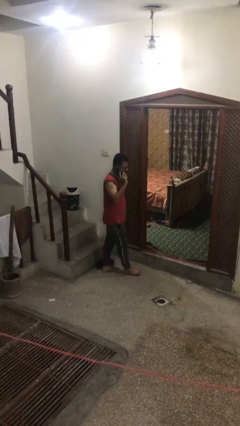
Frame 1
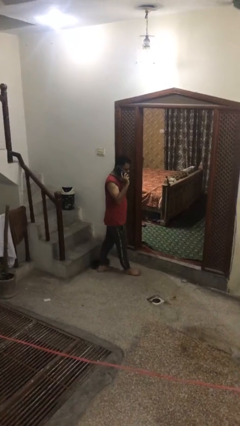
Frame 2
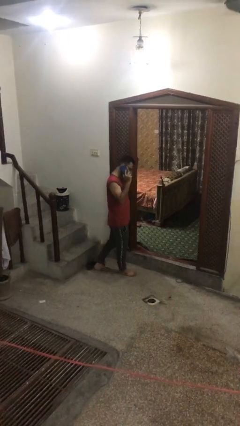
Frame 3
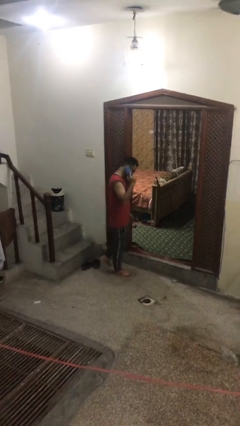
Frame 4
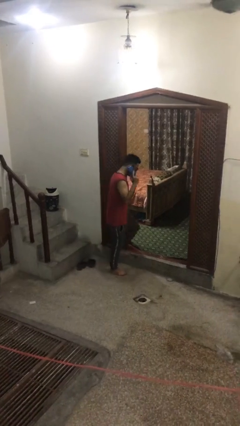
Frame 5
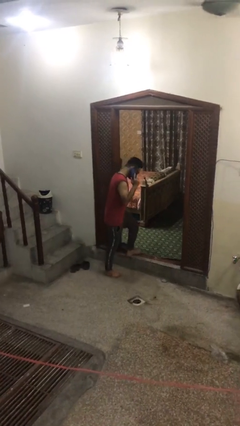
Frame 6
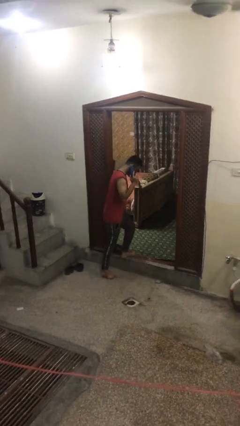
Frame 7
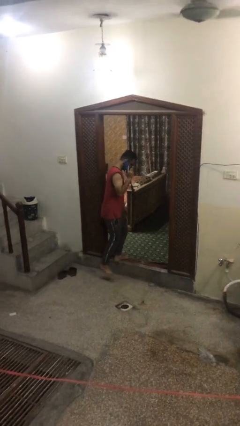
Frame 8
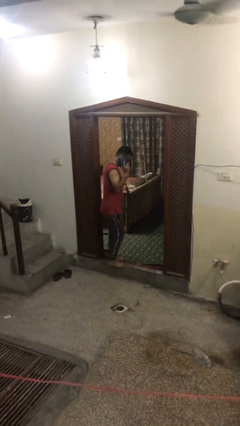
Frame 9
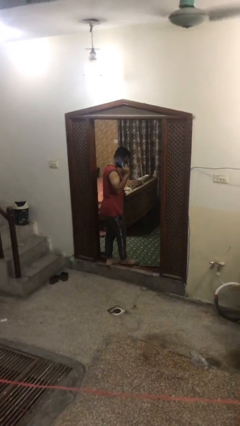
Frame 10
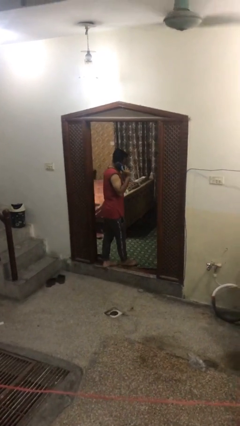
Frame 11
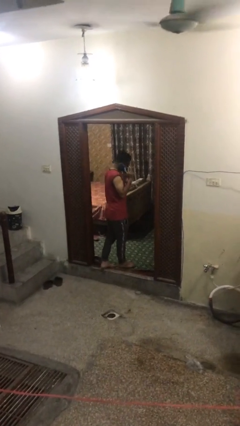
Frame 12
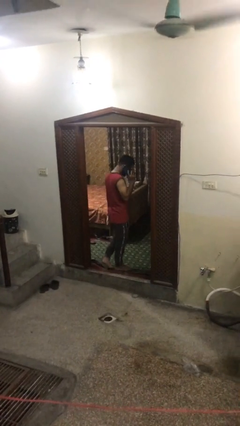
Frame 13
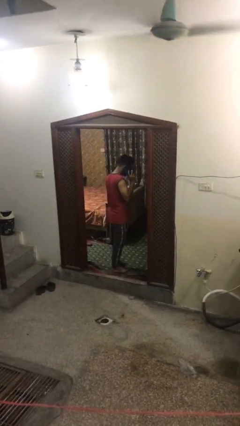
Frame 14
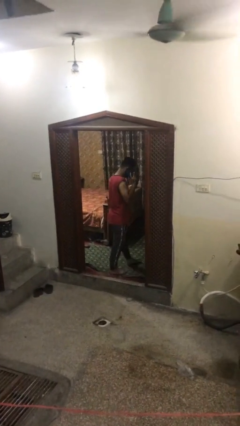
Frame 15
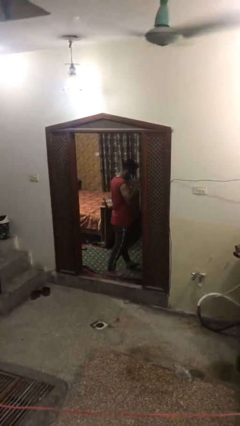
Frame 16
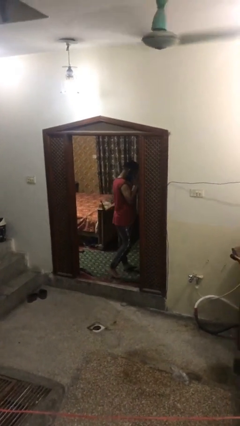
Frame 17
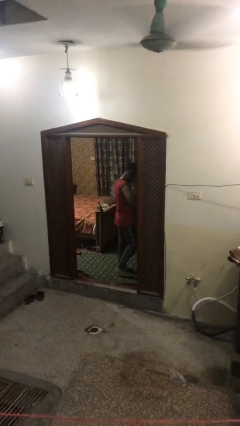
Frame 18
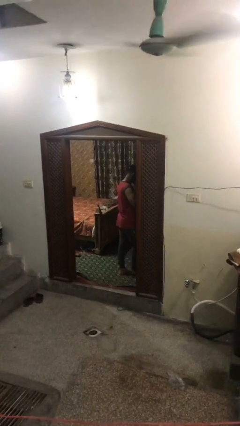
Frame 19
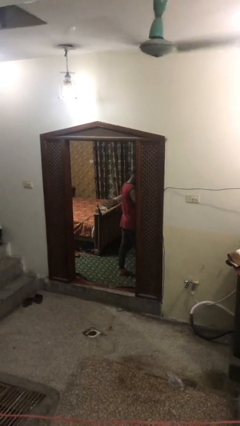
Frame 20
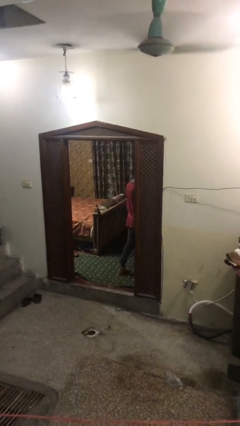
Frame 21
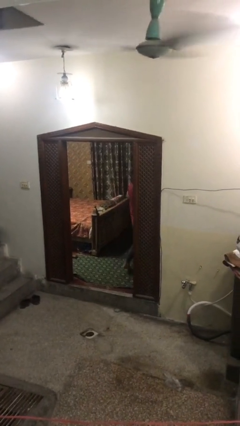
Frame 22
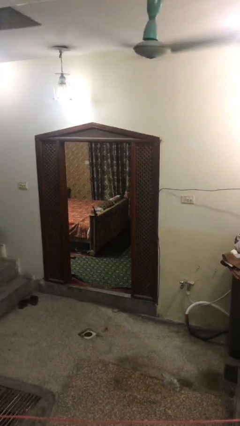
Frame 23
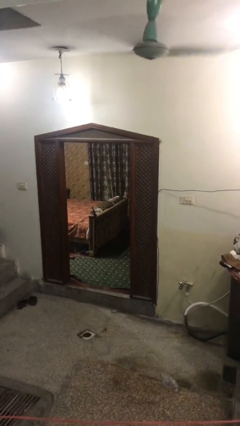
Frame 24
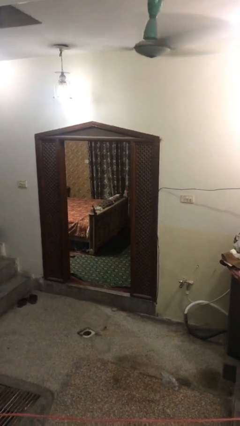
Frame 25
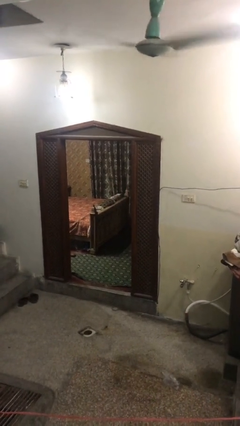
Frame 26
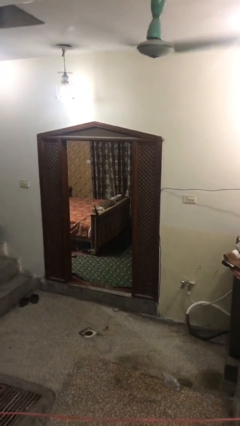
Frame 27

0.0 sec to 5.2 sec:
person exits scene through structure

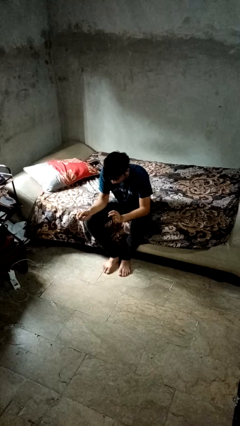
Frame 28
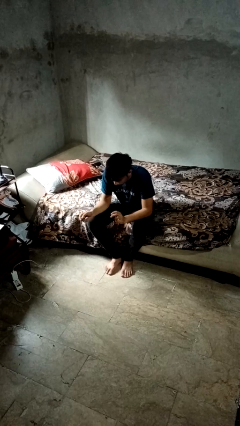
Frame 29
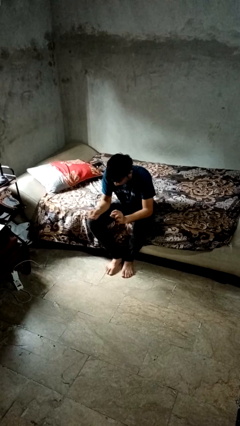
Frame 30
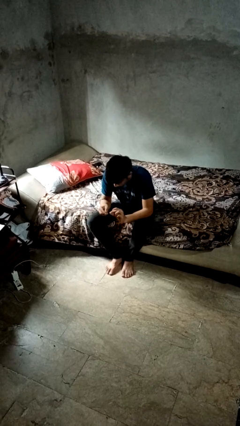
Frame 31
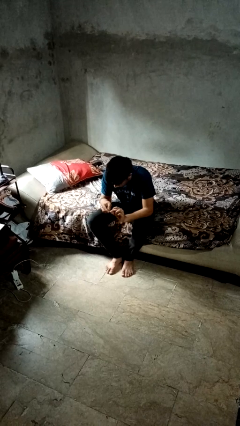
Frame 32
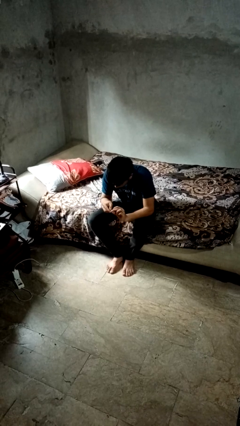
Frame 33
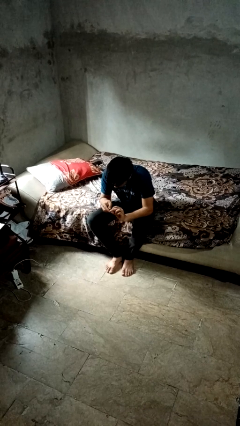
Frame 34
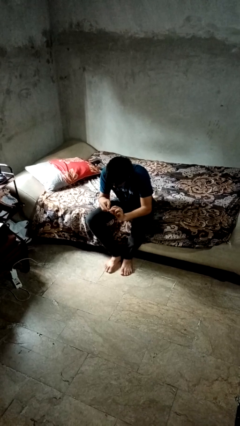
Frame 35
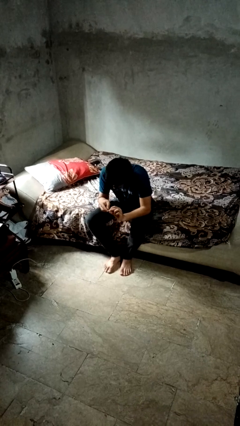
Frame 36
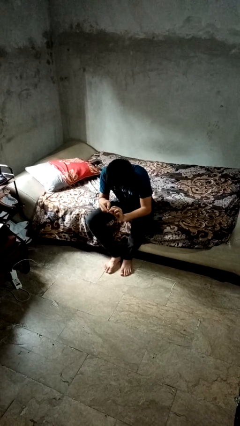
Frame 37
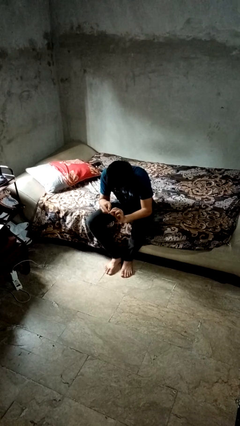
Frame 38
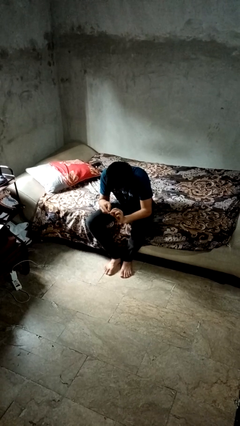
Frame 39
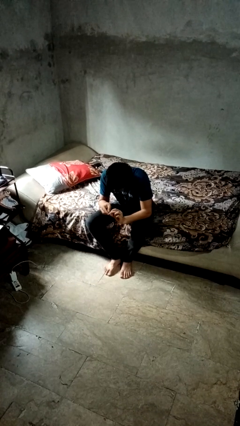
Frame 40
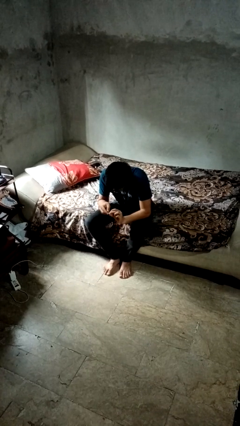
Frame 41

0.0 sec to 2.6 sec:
person files fingernails

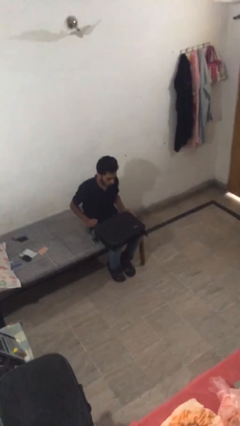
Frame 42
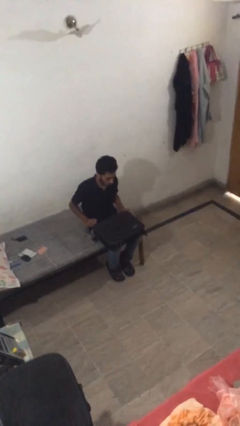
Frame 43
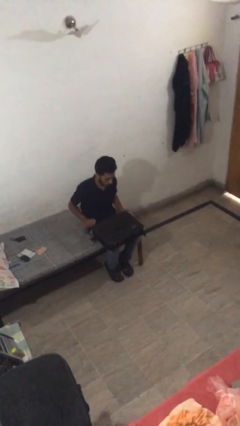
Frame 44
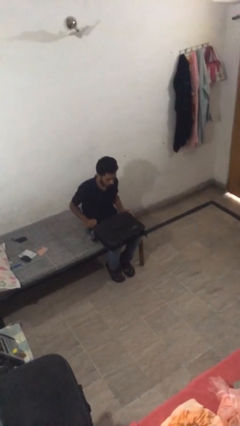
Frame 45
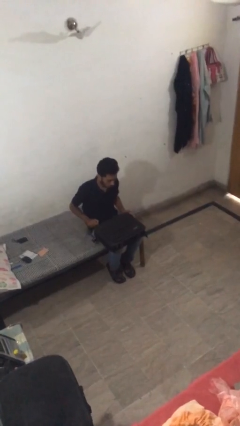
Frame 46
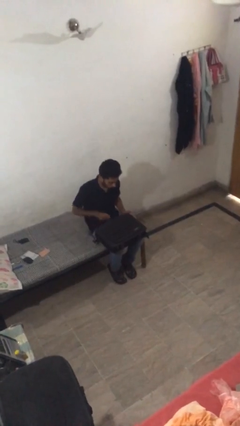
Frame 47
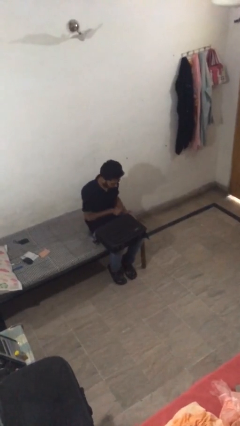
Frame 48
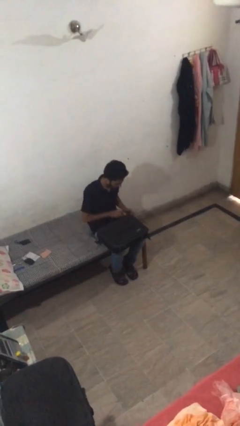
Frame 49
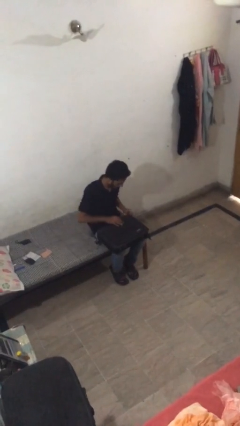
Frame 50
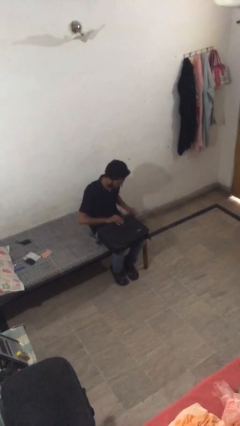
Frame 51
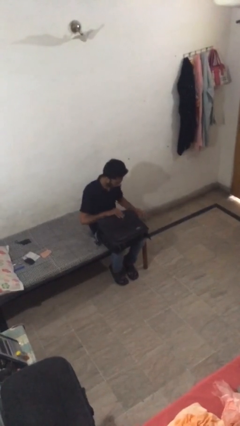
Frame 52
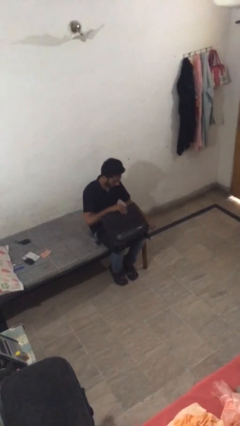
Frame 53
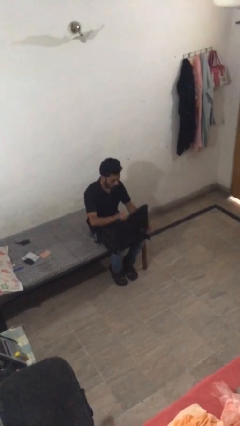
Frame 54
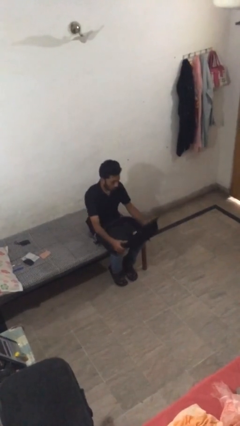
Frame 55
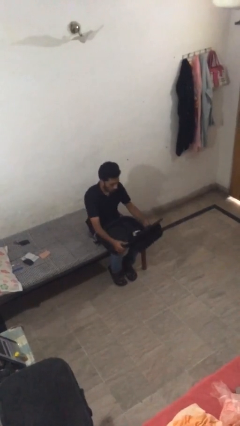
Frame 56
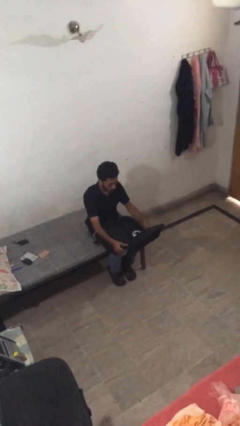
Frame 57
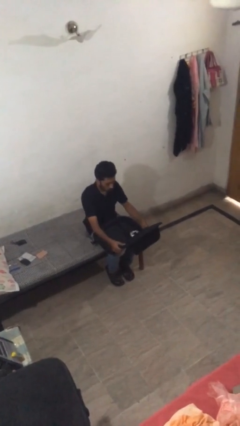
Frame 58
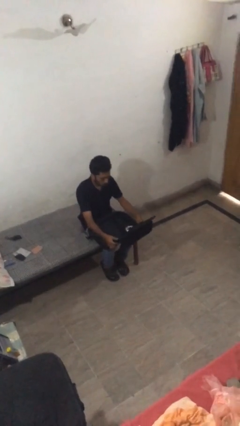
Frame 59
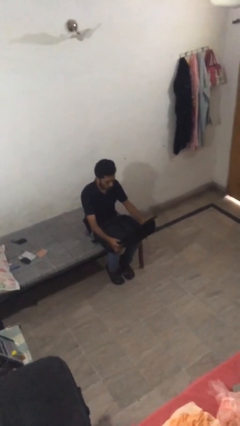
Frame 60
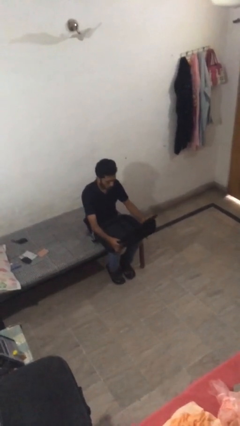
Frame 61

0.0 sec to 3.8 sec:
person opens suitcase

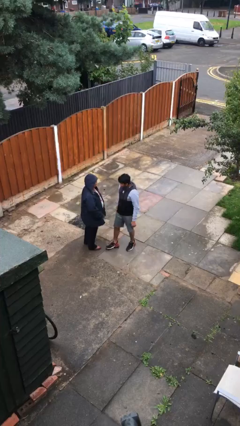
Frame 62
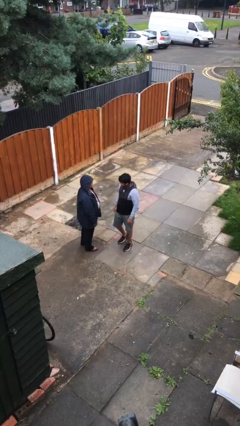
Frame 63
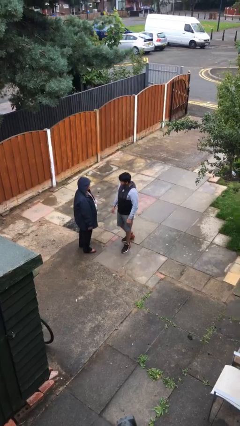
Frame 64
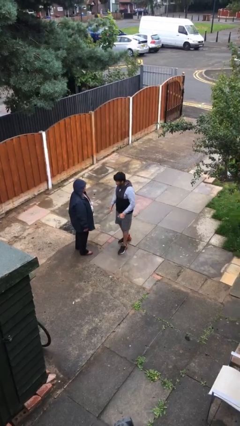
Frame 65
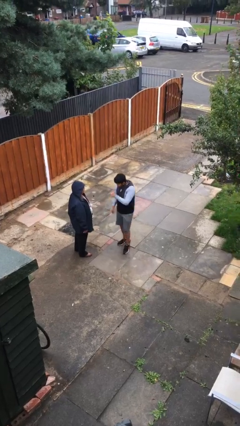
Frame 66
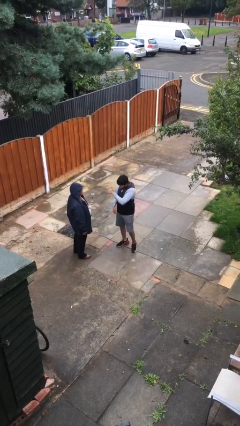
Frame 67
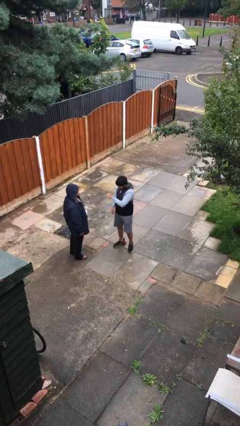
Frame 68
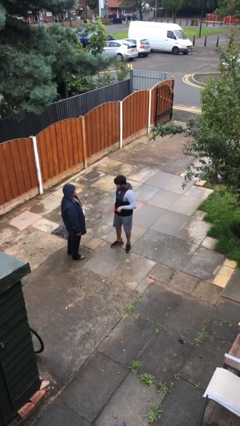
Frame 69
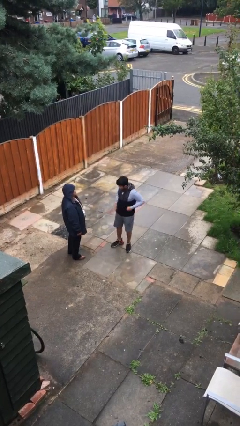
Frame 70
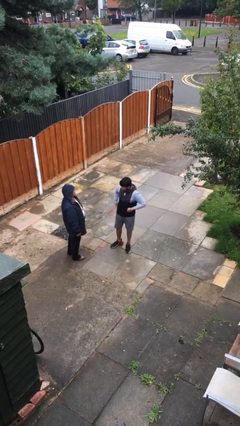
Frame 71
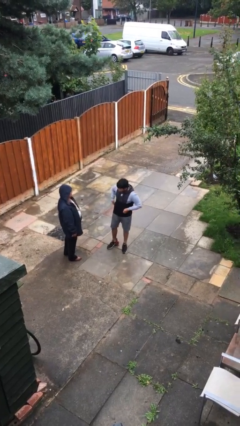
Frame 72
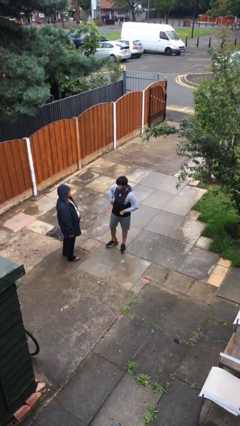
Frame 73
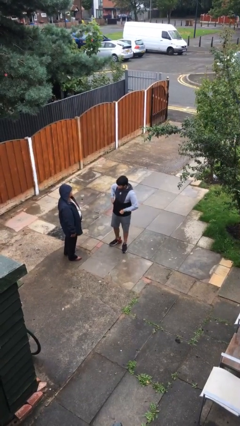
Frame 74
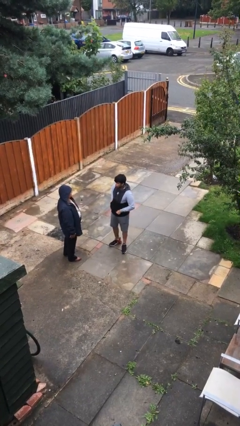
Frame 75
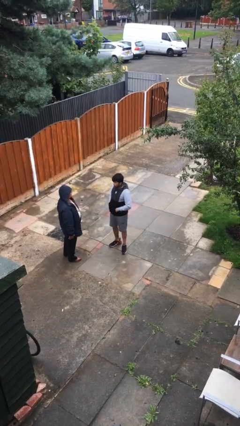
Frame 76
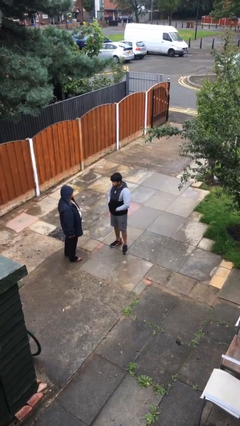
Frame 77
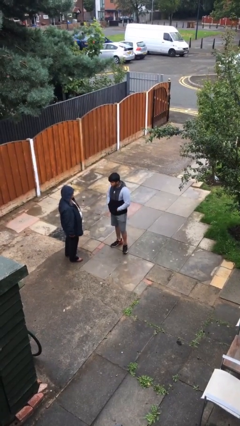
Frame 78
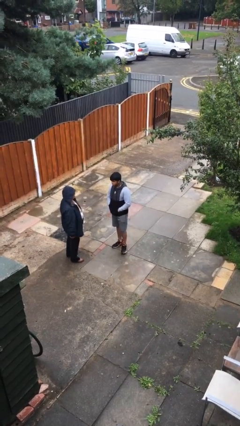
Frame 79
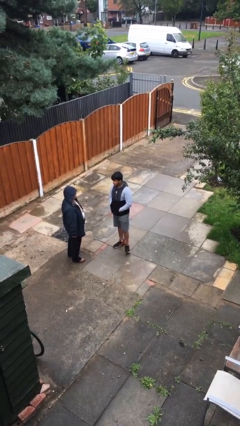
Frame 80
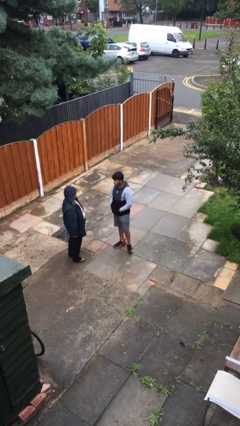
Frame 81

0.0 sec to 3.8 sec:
person talks to person

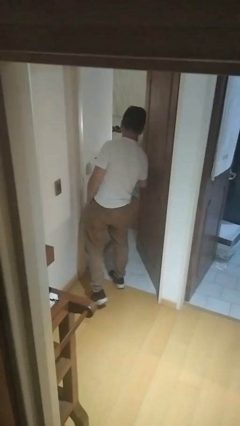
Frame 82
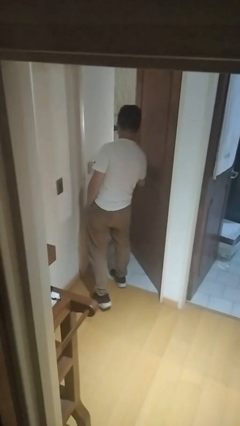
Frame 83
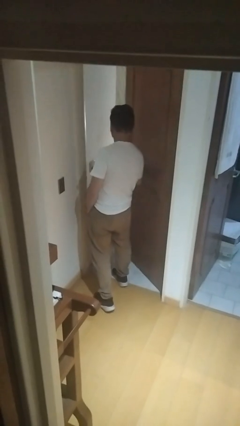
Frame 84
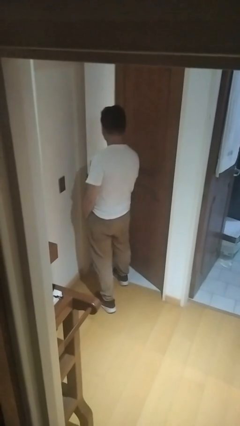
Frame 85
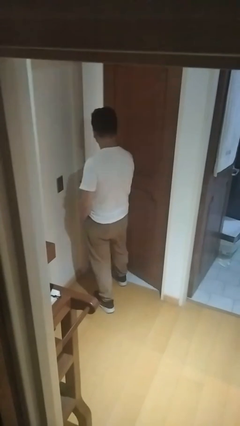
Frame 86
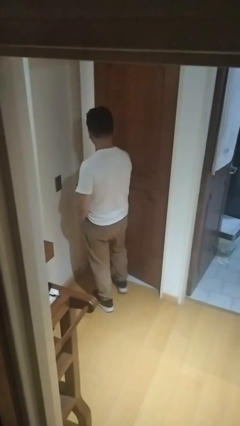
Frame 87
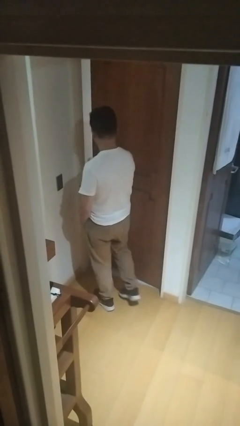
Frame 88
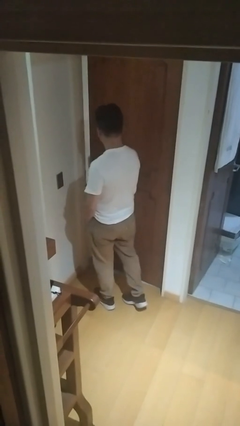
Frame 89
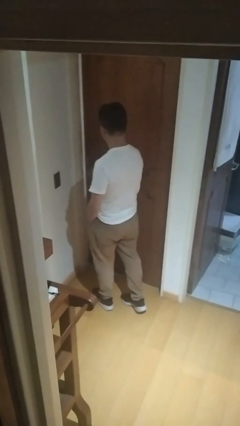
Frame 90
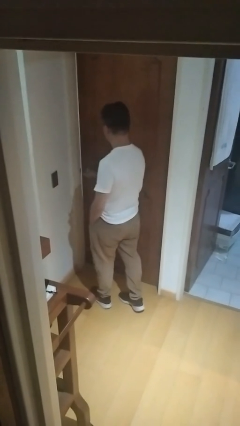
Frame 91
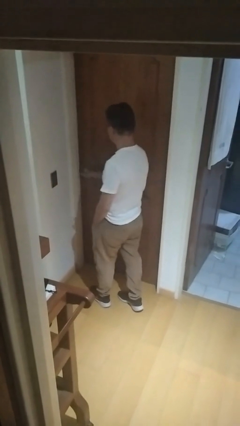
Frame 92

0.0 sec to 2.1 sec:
person closes facility door
